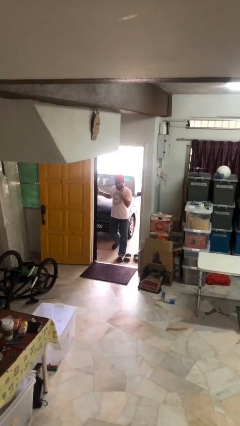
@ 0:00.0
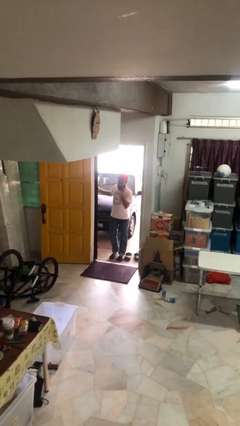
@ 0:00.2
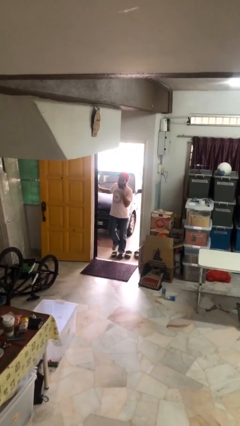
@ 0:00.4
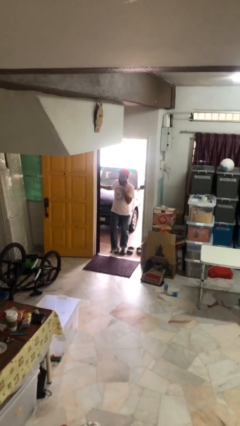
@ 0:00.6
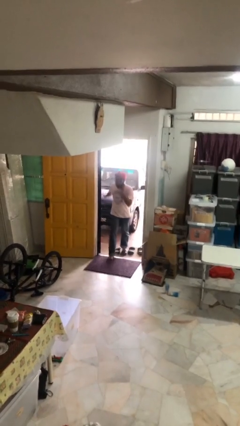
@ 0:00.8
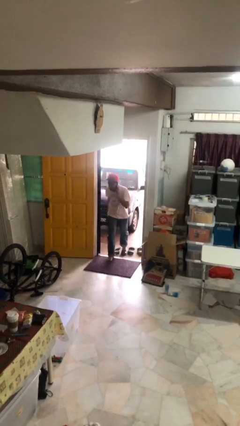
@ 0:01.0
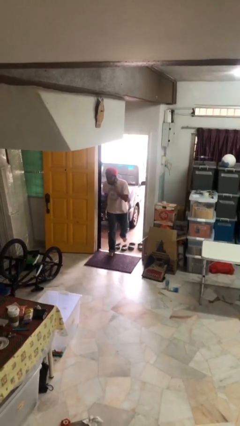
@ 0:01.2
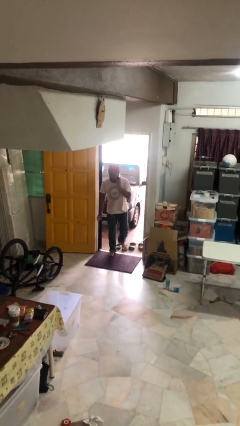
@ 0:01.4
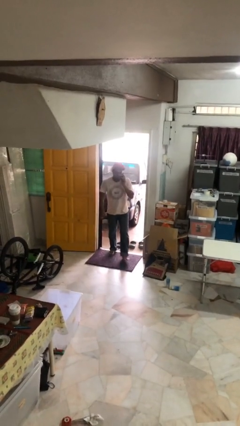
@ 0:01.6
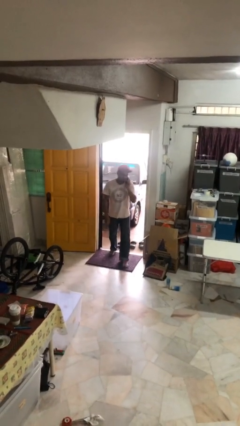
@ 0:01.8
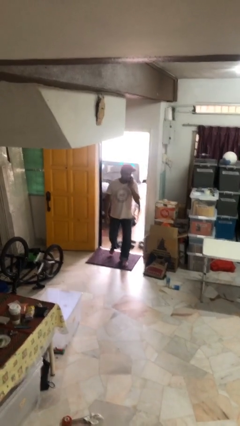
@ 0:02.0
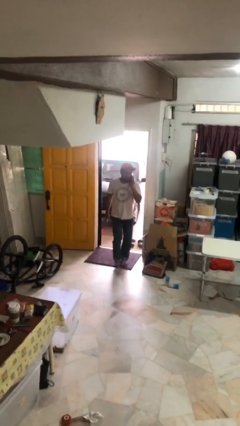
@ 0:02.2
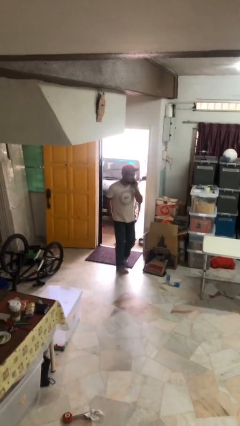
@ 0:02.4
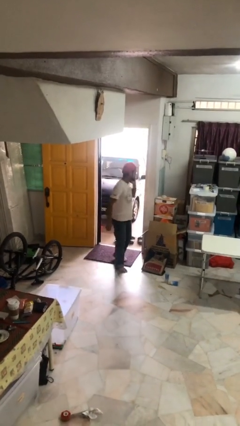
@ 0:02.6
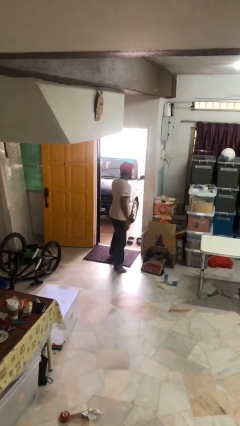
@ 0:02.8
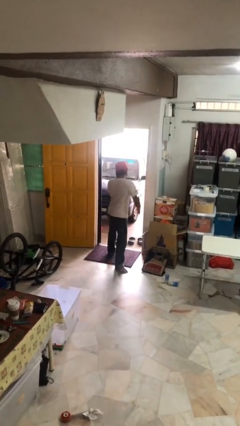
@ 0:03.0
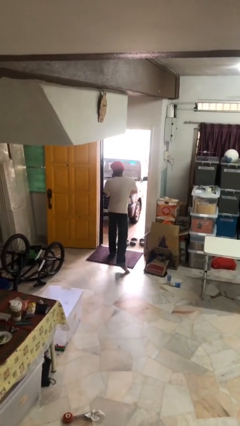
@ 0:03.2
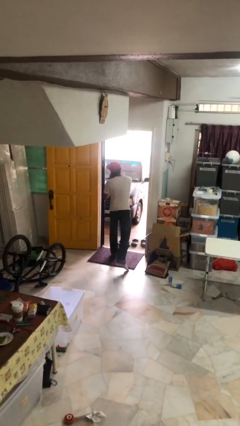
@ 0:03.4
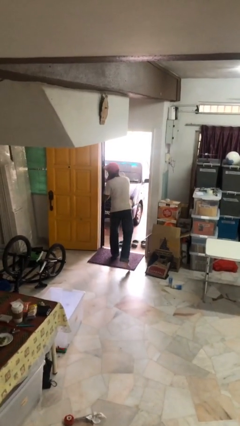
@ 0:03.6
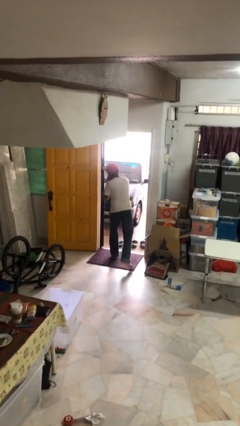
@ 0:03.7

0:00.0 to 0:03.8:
person enters scene through structure

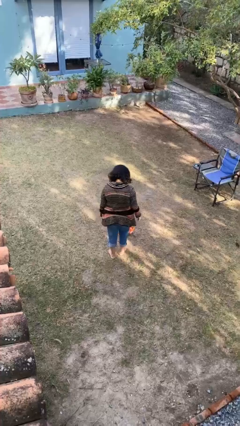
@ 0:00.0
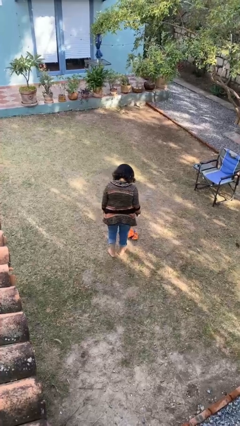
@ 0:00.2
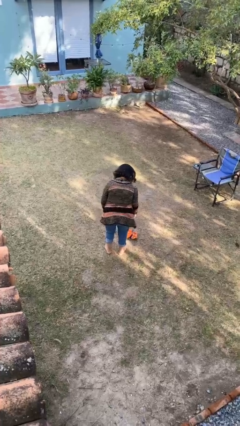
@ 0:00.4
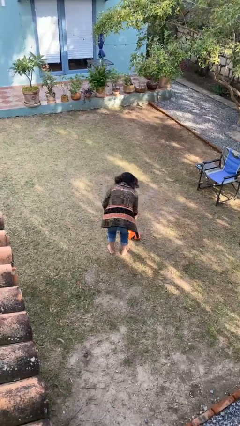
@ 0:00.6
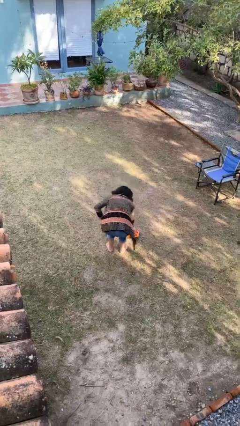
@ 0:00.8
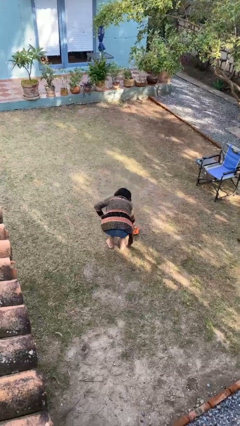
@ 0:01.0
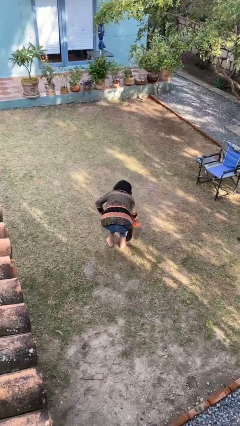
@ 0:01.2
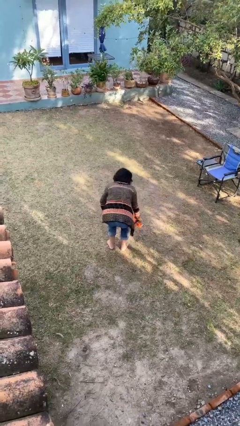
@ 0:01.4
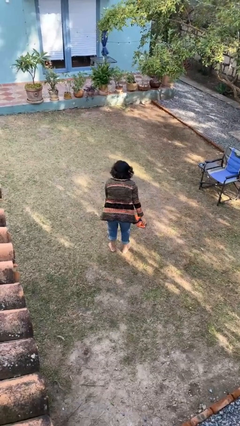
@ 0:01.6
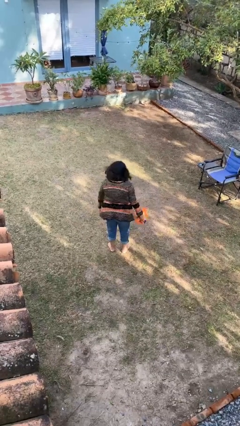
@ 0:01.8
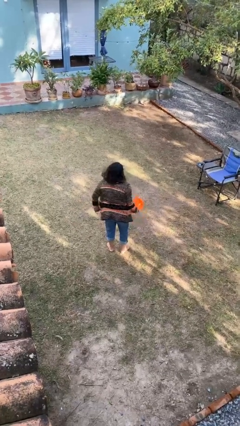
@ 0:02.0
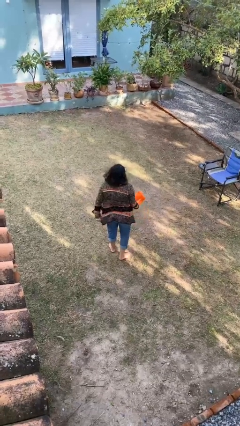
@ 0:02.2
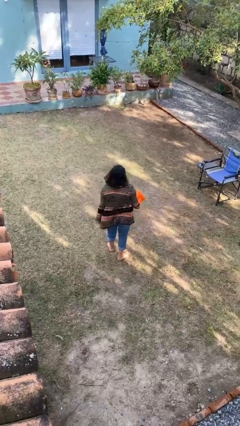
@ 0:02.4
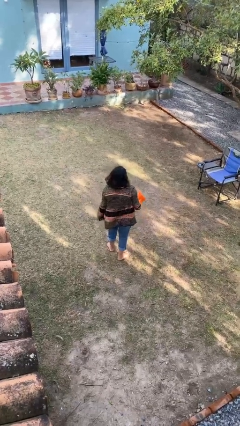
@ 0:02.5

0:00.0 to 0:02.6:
person picks up object from floor

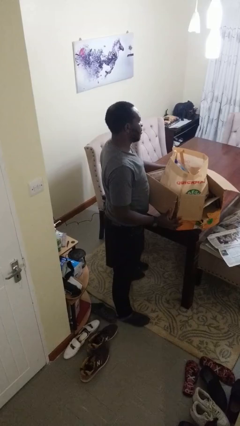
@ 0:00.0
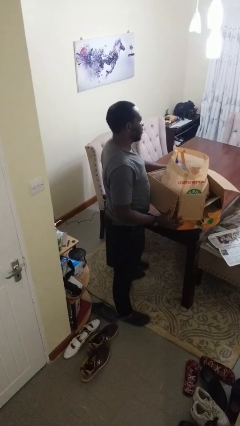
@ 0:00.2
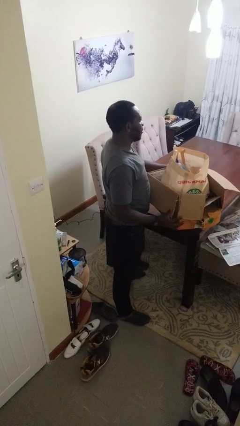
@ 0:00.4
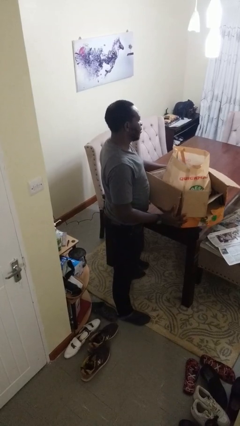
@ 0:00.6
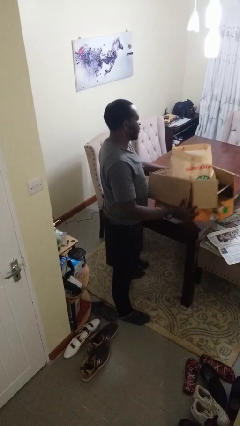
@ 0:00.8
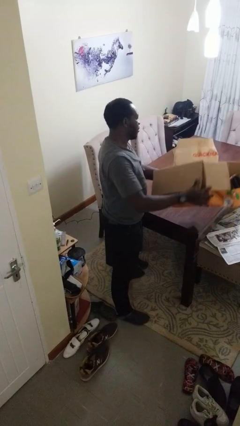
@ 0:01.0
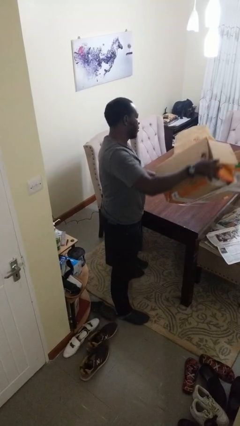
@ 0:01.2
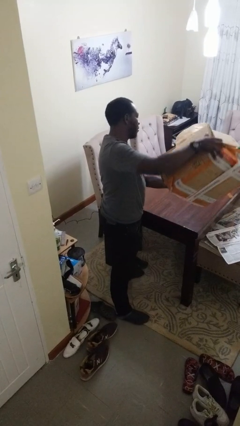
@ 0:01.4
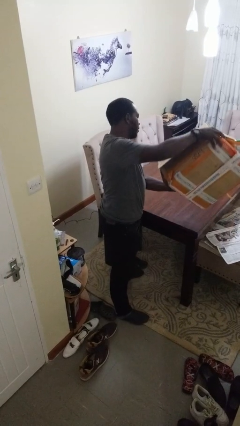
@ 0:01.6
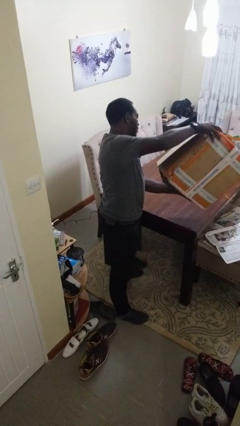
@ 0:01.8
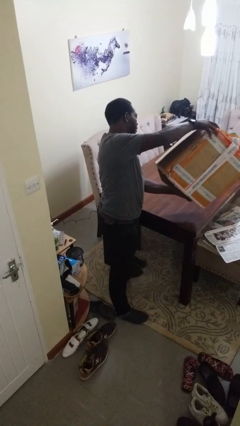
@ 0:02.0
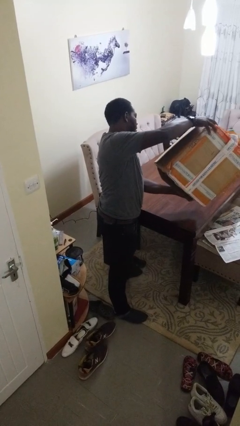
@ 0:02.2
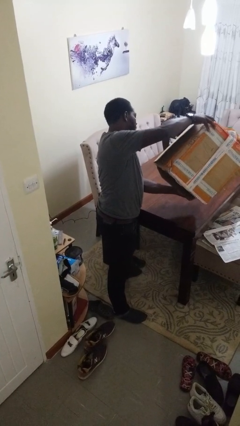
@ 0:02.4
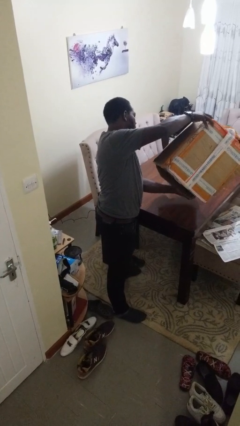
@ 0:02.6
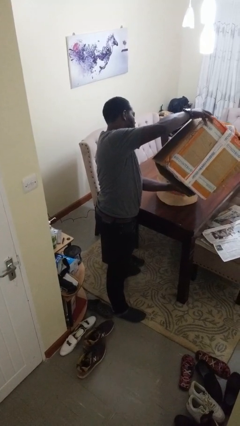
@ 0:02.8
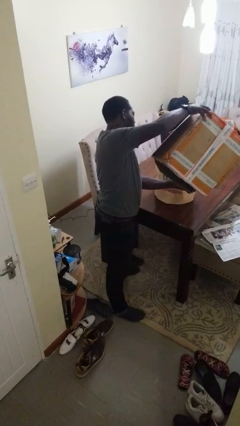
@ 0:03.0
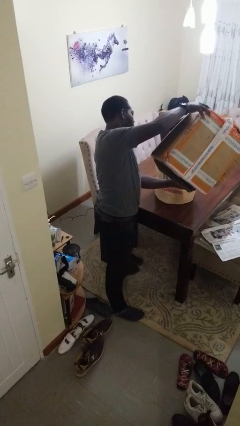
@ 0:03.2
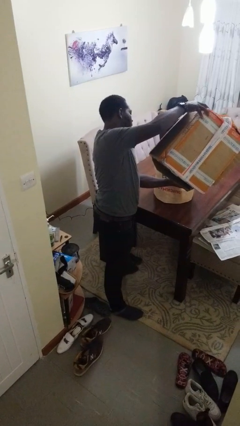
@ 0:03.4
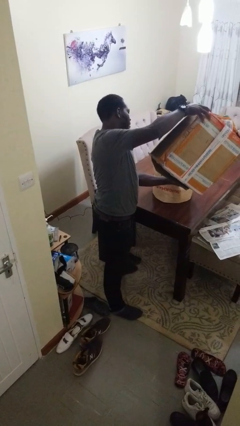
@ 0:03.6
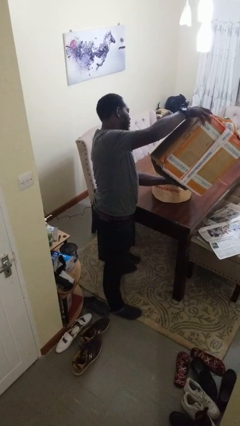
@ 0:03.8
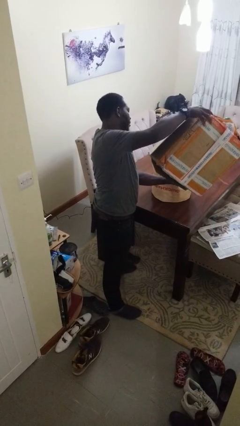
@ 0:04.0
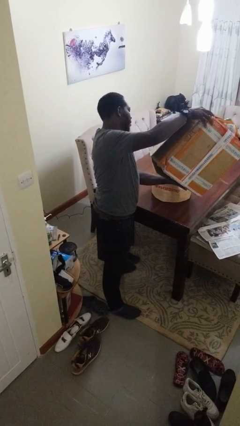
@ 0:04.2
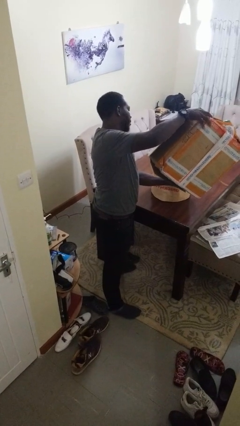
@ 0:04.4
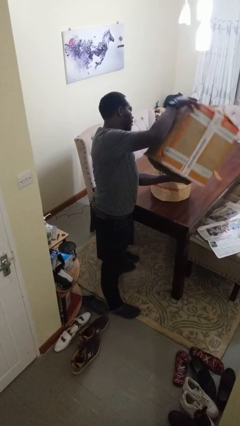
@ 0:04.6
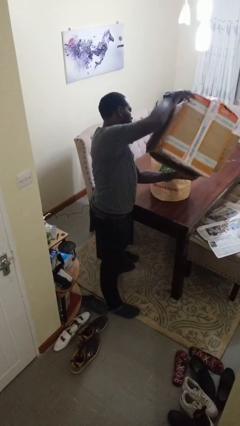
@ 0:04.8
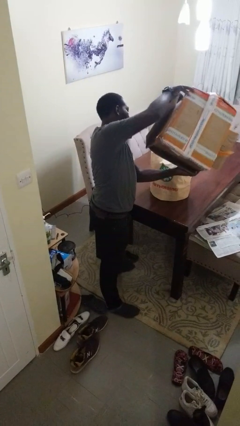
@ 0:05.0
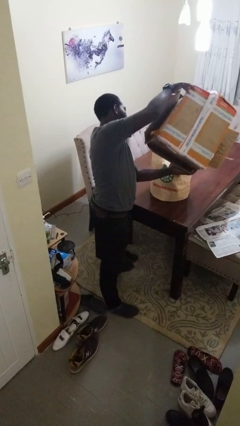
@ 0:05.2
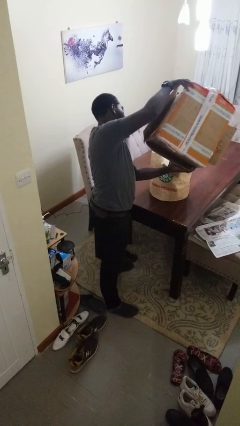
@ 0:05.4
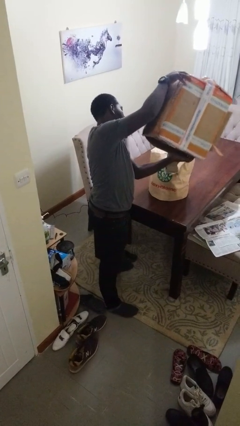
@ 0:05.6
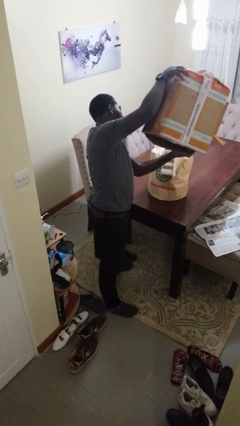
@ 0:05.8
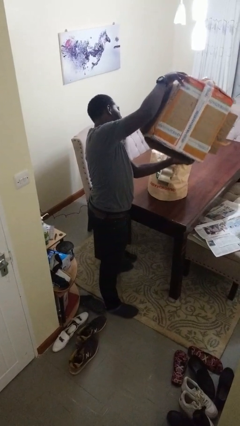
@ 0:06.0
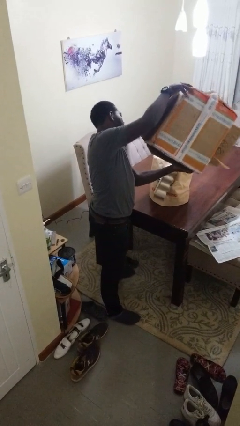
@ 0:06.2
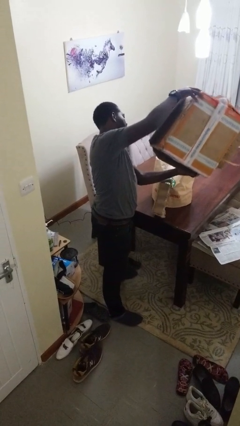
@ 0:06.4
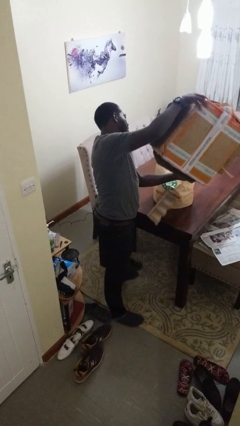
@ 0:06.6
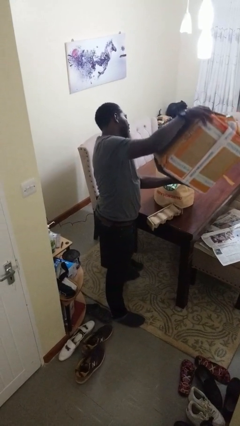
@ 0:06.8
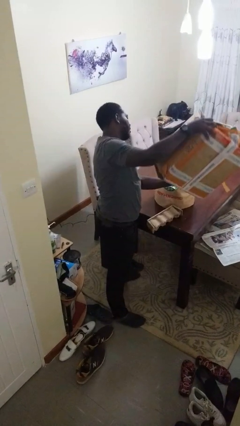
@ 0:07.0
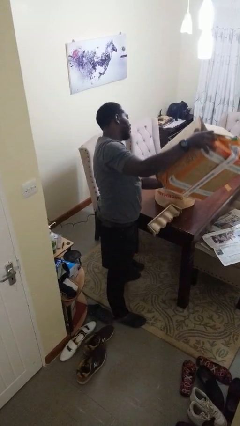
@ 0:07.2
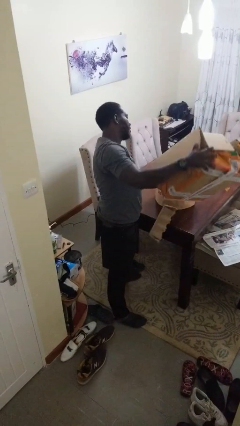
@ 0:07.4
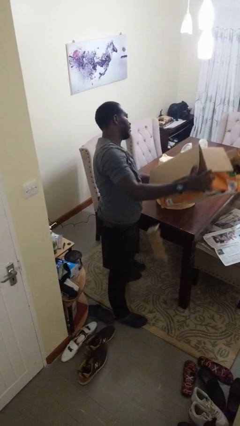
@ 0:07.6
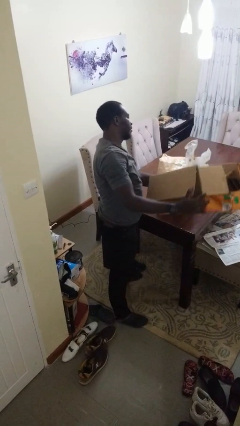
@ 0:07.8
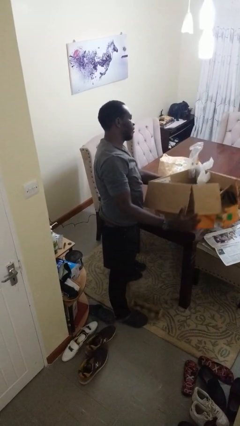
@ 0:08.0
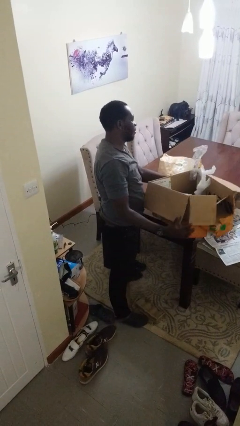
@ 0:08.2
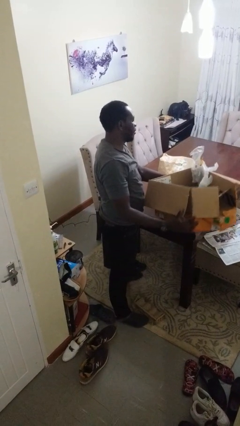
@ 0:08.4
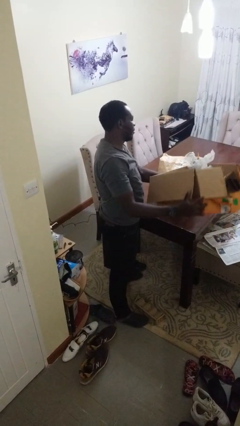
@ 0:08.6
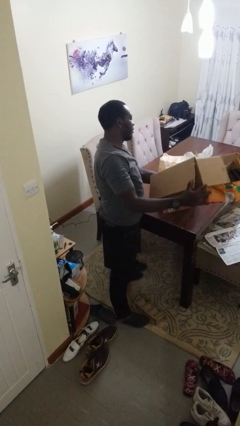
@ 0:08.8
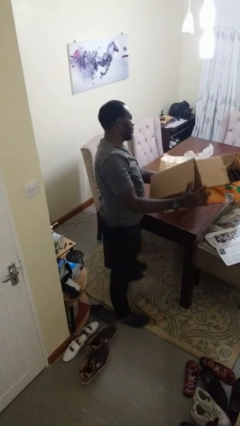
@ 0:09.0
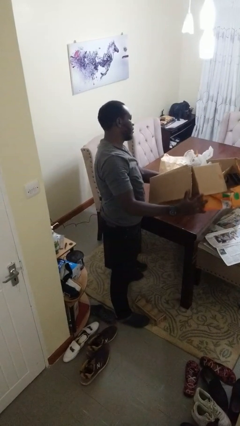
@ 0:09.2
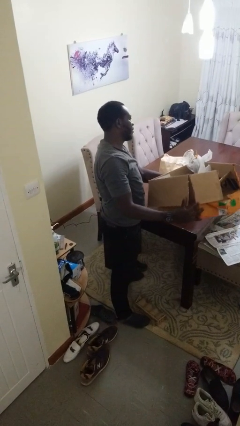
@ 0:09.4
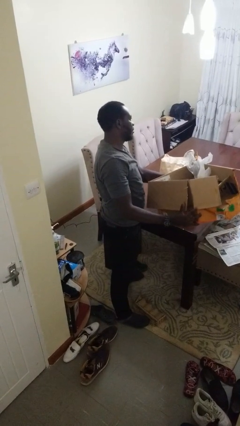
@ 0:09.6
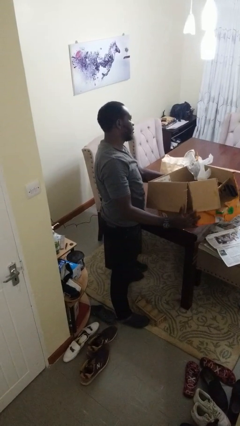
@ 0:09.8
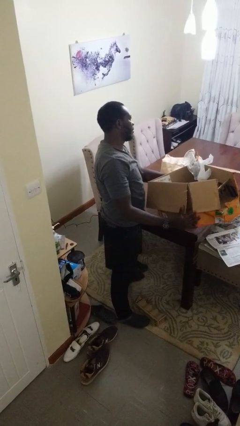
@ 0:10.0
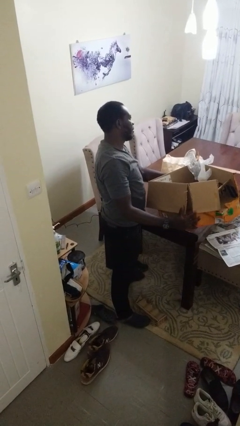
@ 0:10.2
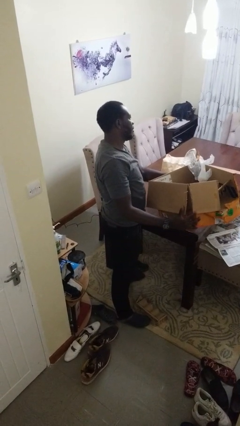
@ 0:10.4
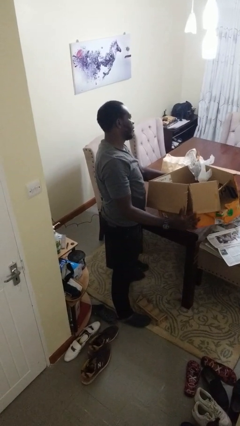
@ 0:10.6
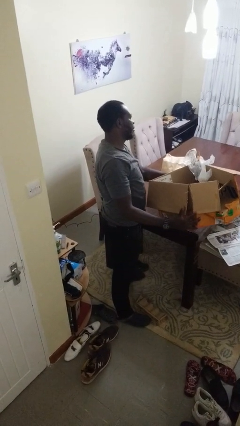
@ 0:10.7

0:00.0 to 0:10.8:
person unloads box onto table

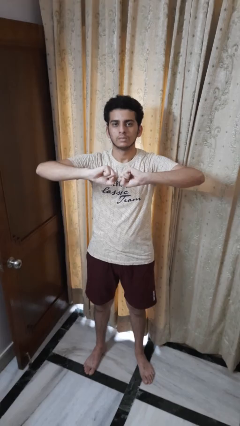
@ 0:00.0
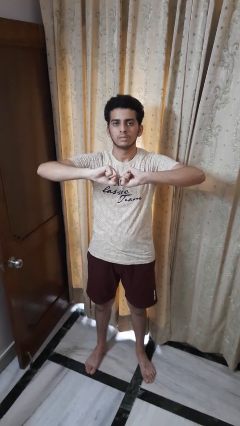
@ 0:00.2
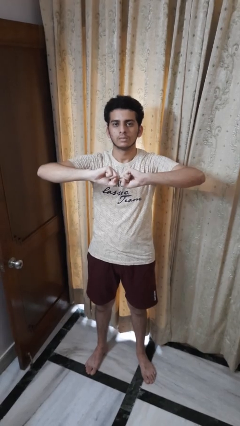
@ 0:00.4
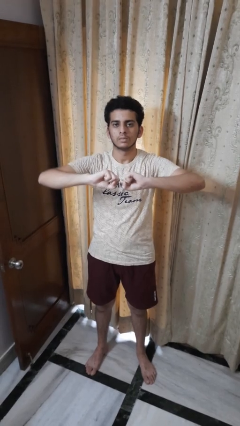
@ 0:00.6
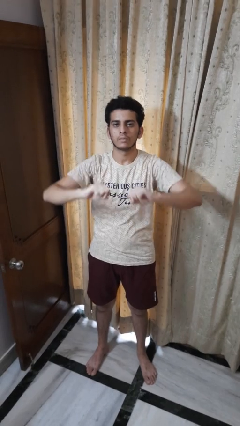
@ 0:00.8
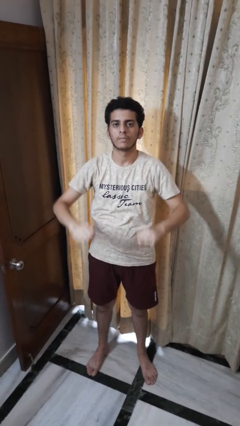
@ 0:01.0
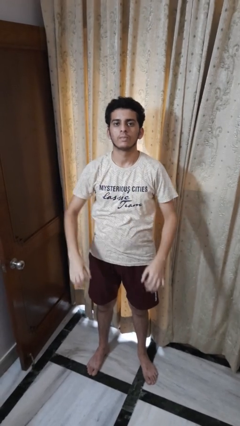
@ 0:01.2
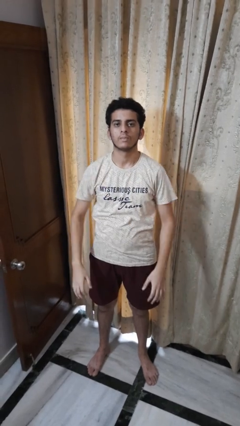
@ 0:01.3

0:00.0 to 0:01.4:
person gestures zoom in
